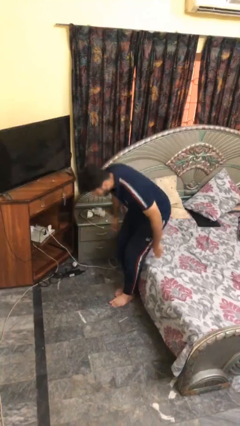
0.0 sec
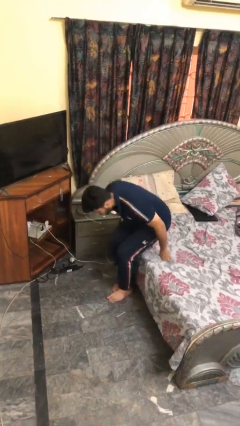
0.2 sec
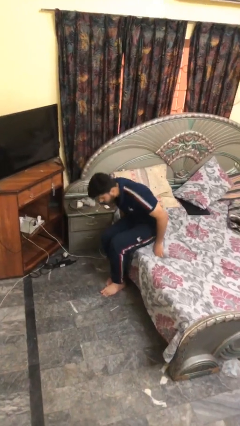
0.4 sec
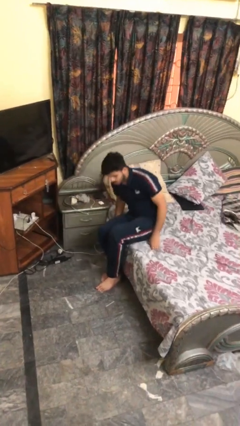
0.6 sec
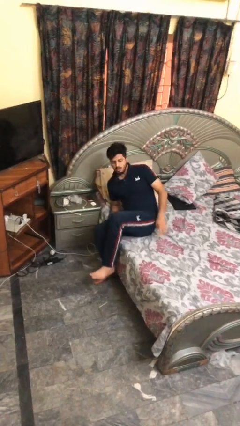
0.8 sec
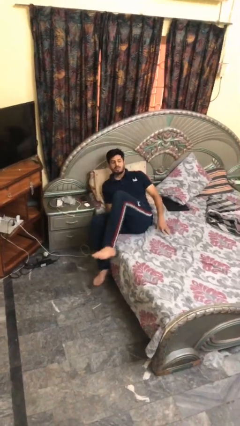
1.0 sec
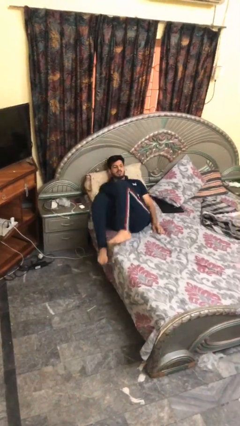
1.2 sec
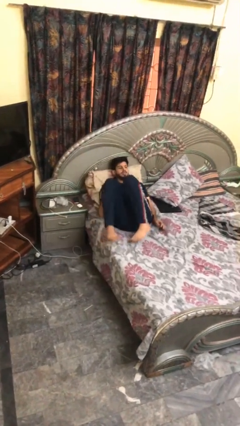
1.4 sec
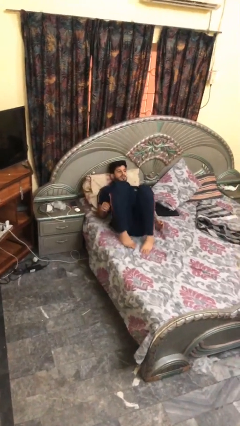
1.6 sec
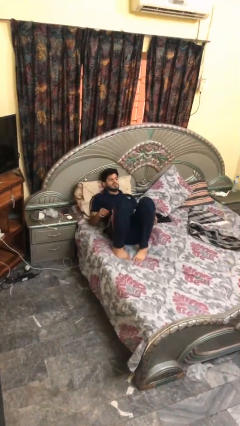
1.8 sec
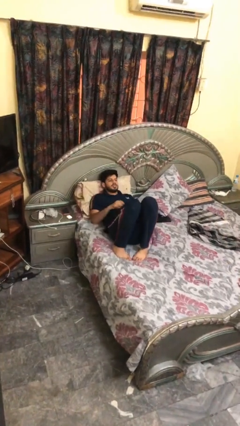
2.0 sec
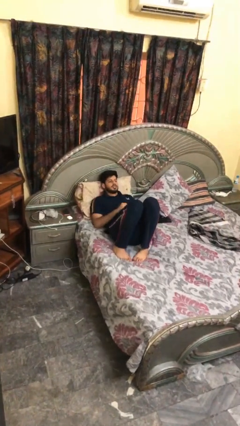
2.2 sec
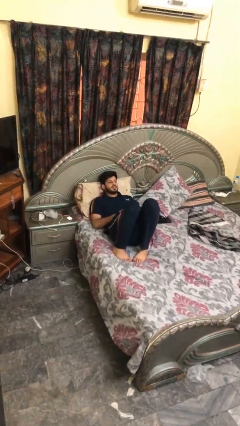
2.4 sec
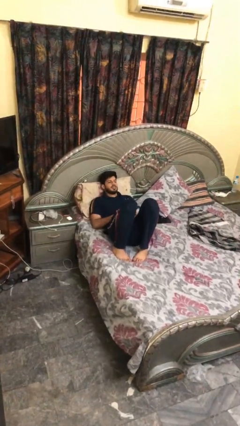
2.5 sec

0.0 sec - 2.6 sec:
person lies down on bed

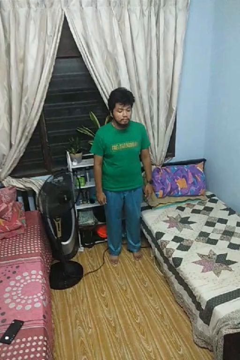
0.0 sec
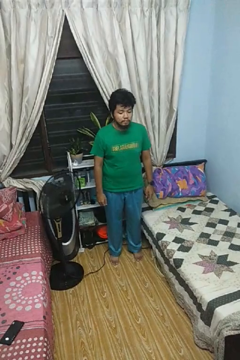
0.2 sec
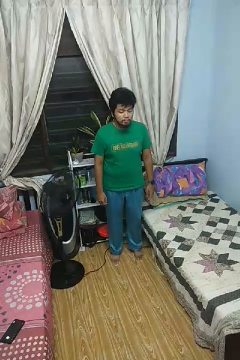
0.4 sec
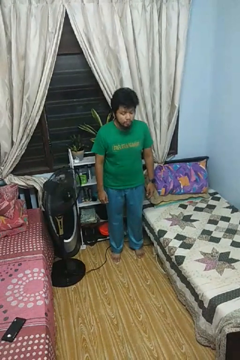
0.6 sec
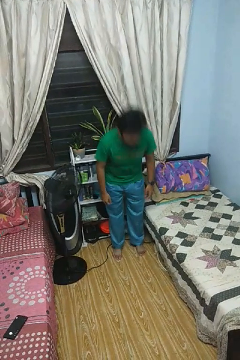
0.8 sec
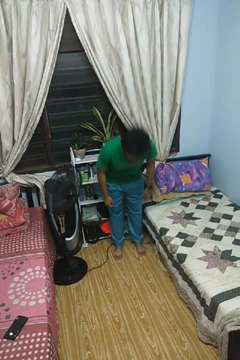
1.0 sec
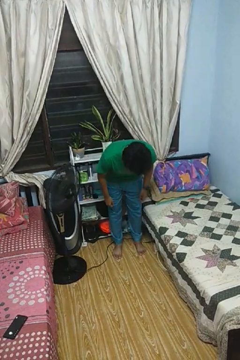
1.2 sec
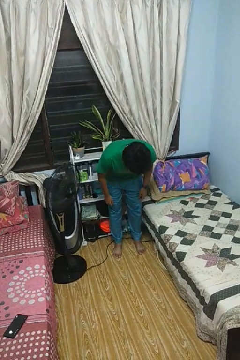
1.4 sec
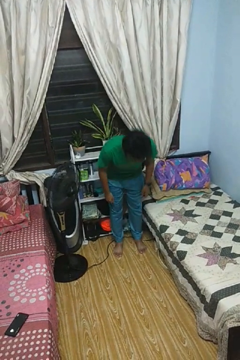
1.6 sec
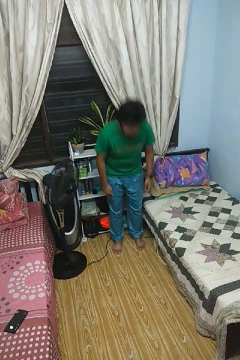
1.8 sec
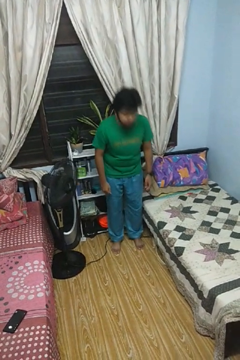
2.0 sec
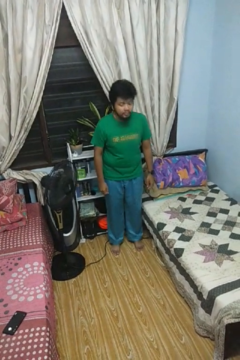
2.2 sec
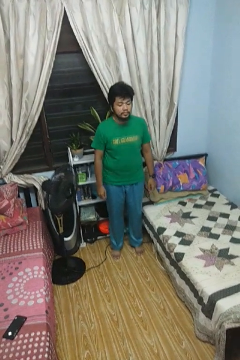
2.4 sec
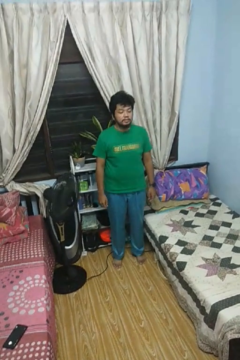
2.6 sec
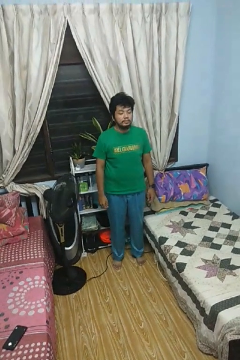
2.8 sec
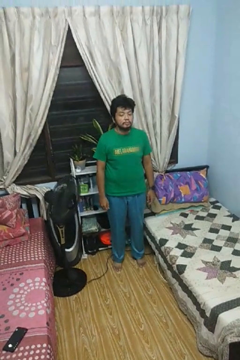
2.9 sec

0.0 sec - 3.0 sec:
person bows

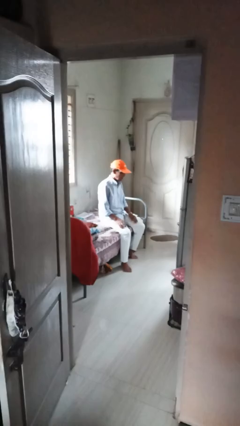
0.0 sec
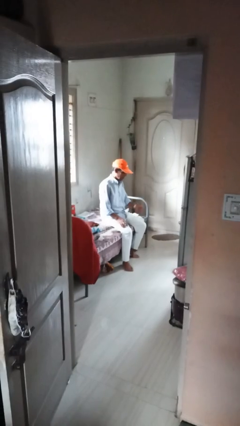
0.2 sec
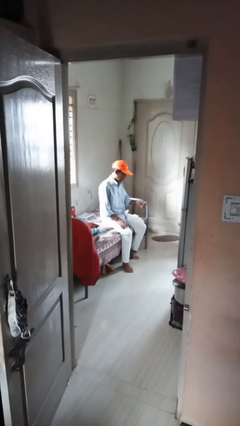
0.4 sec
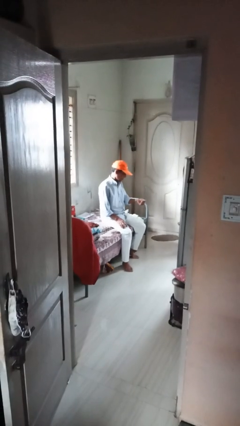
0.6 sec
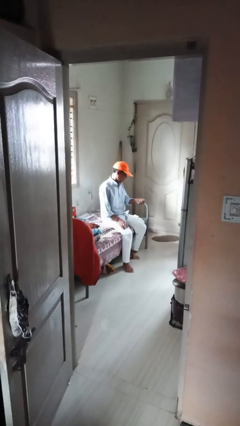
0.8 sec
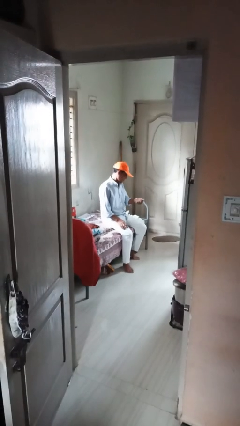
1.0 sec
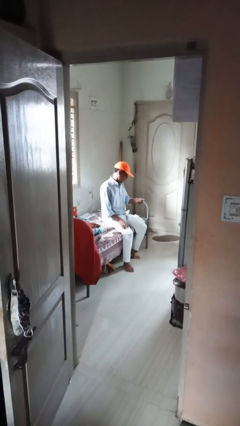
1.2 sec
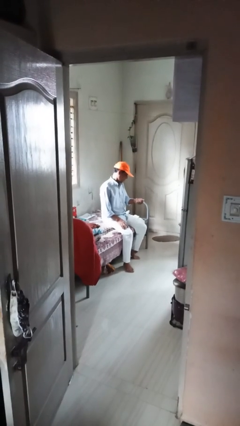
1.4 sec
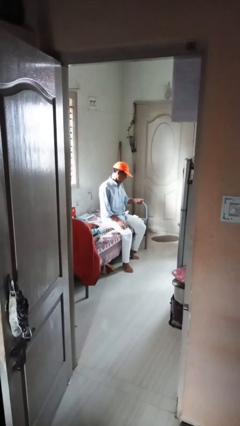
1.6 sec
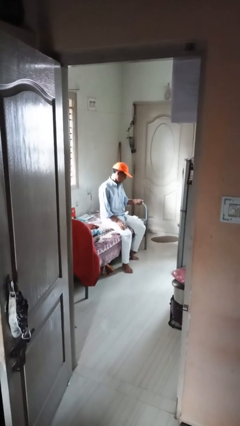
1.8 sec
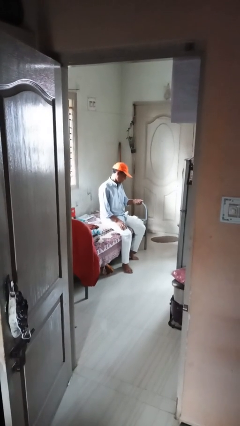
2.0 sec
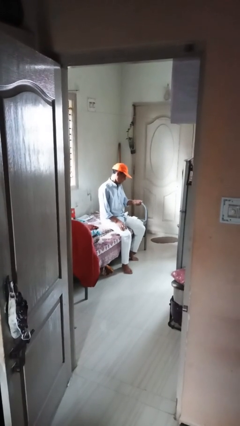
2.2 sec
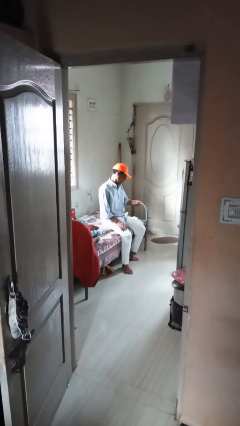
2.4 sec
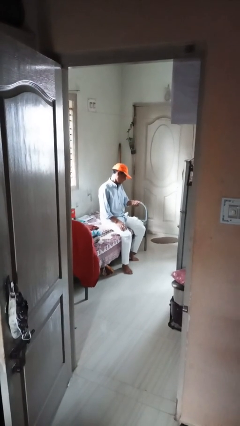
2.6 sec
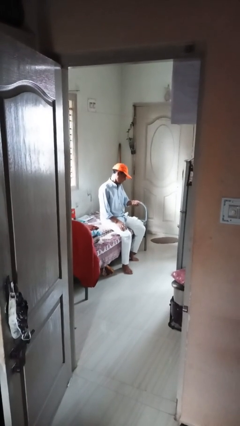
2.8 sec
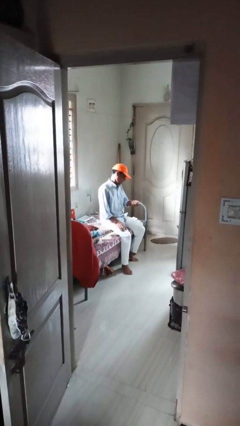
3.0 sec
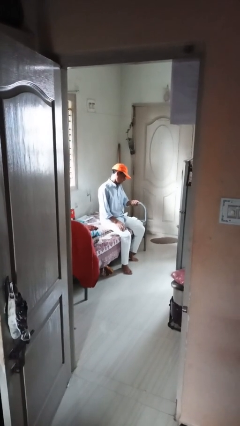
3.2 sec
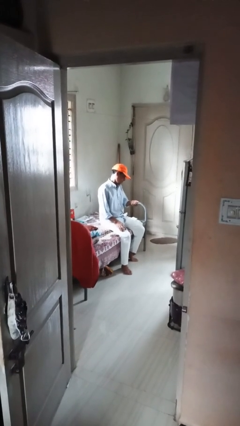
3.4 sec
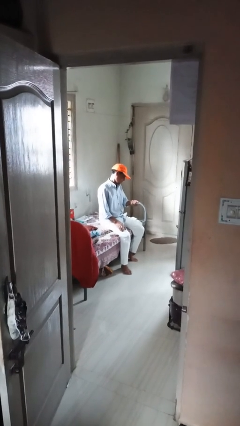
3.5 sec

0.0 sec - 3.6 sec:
person looks at wristwatch

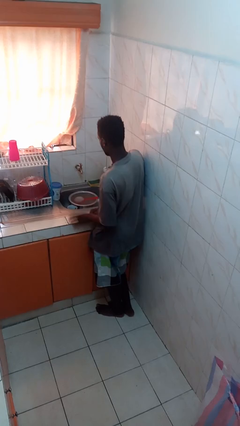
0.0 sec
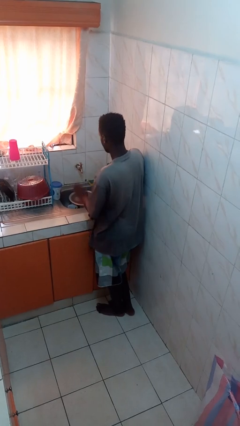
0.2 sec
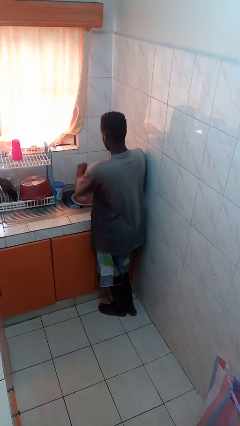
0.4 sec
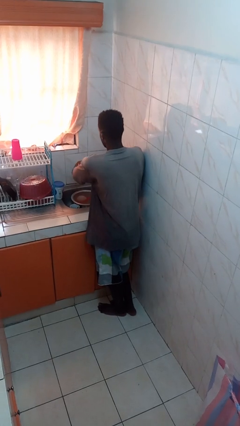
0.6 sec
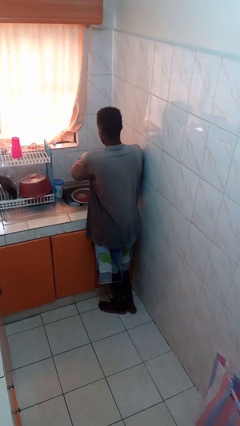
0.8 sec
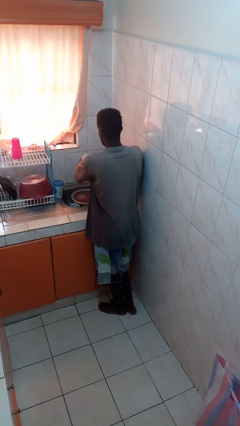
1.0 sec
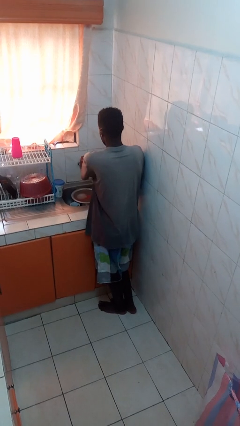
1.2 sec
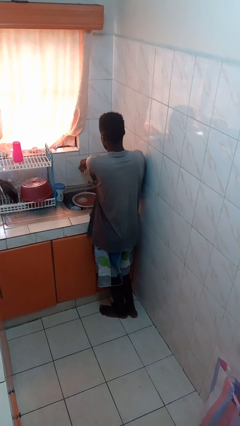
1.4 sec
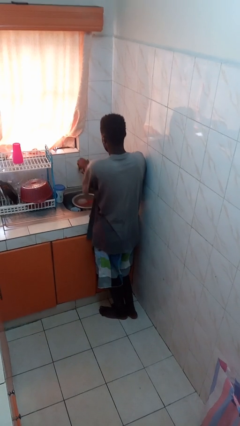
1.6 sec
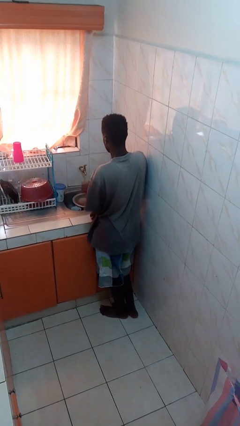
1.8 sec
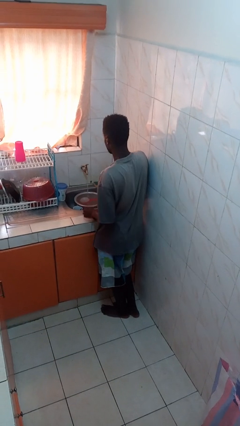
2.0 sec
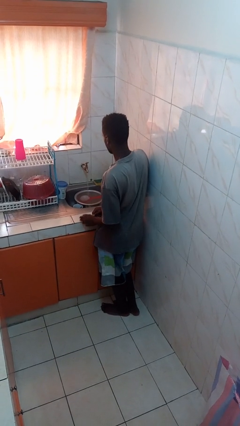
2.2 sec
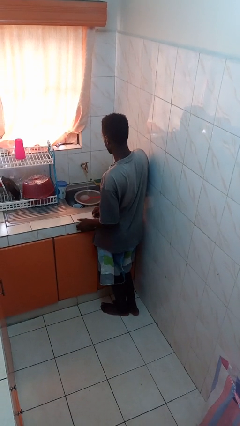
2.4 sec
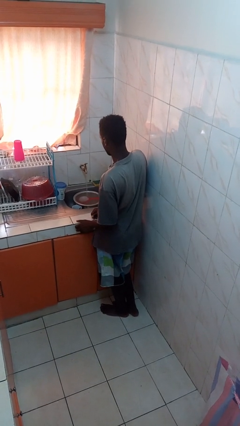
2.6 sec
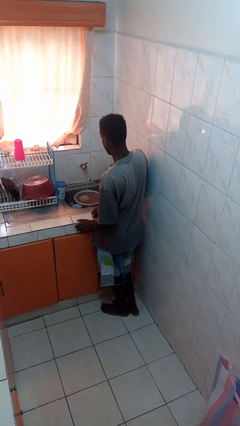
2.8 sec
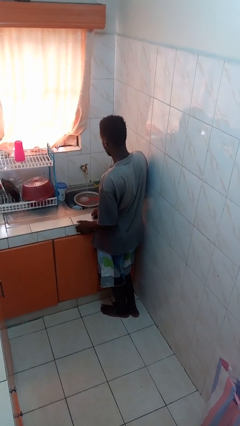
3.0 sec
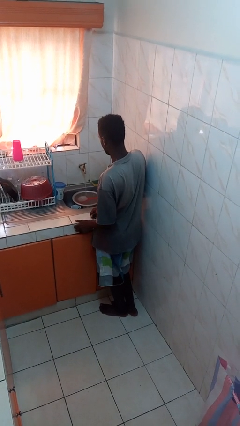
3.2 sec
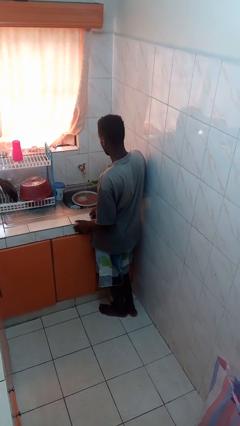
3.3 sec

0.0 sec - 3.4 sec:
person turns on faucet

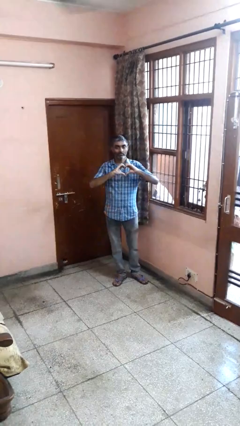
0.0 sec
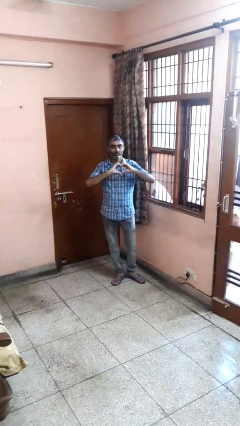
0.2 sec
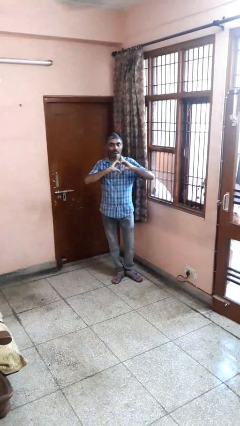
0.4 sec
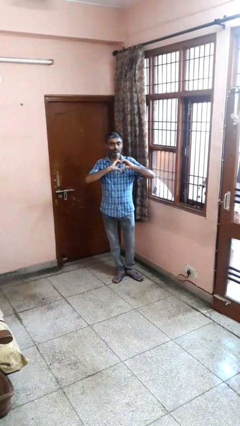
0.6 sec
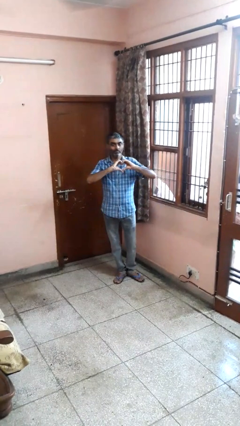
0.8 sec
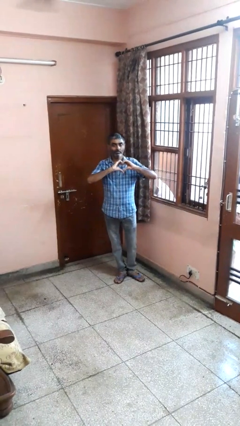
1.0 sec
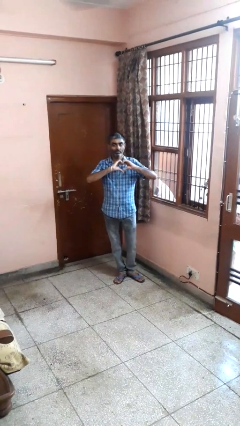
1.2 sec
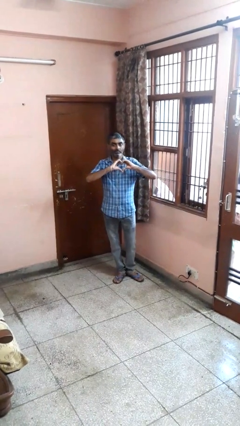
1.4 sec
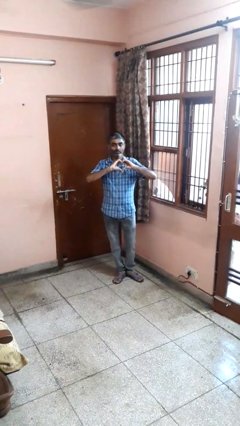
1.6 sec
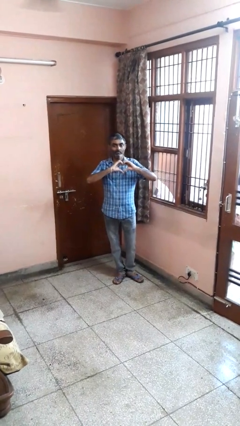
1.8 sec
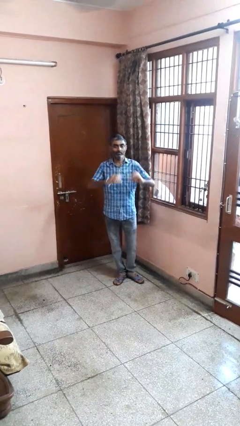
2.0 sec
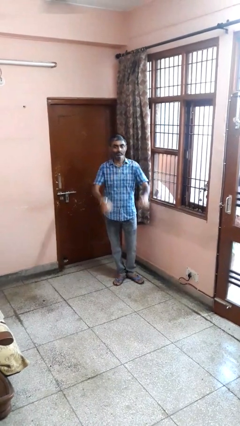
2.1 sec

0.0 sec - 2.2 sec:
person gestures heart

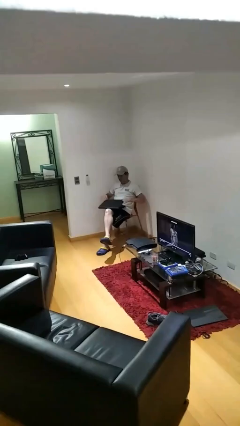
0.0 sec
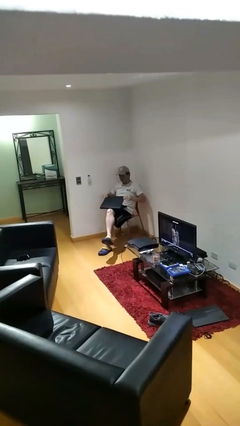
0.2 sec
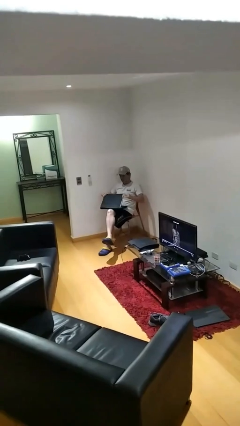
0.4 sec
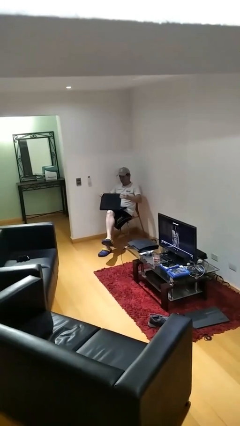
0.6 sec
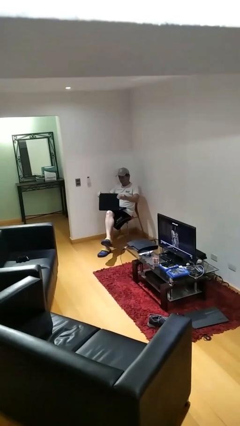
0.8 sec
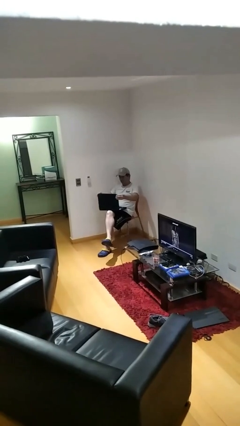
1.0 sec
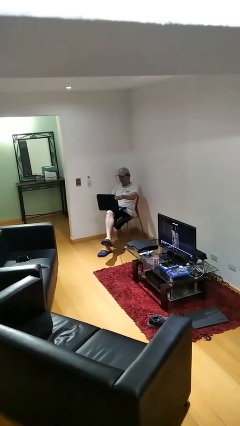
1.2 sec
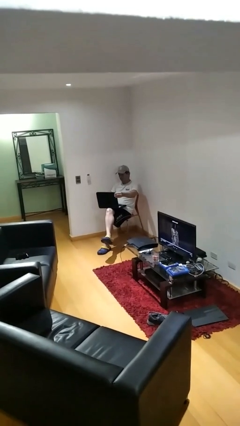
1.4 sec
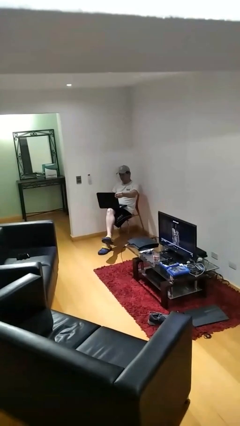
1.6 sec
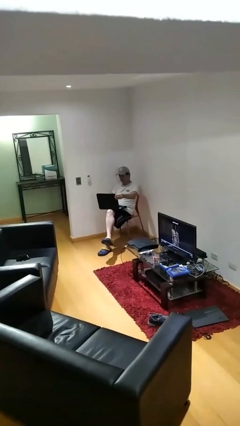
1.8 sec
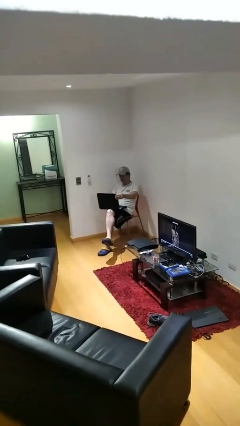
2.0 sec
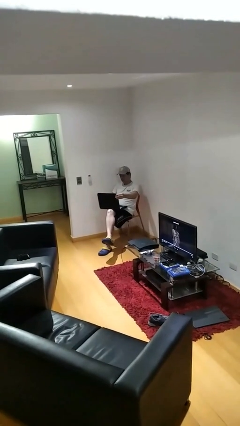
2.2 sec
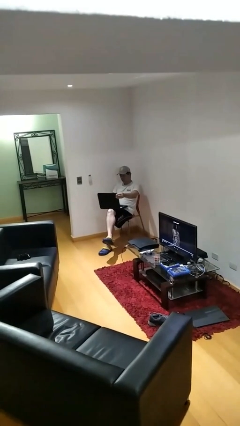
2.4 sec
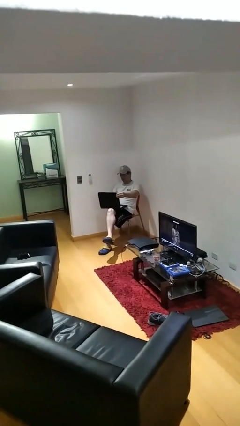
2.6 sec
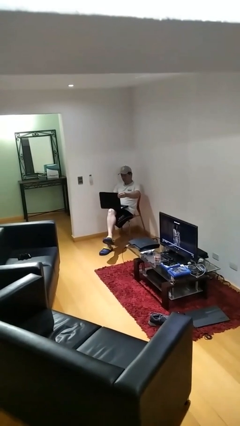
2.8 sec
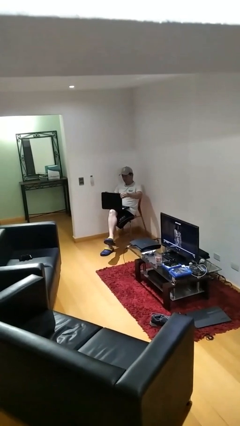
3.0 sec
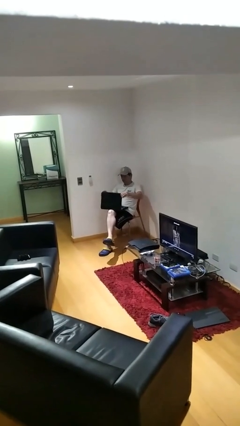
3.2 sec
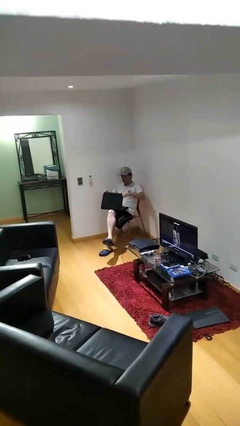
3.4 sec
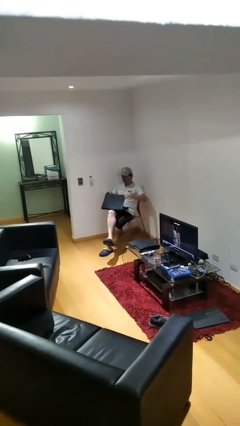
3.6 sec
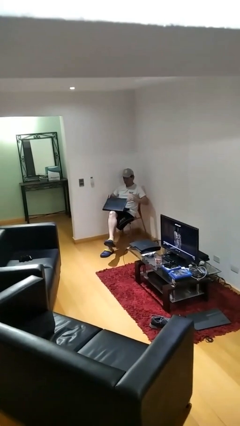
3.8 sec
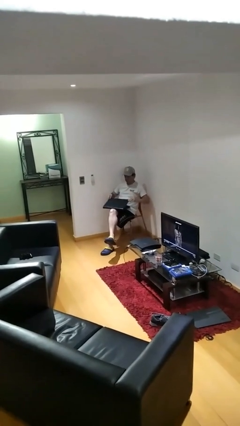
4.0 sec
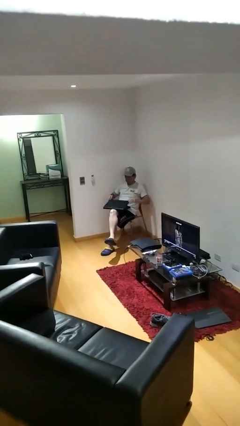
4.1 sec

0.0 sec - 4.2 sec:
person interacts with laptop
